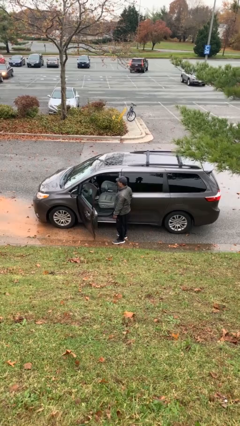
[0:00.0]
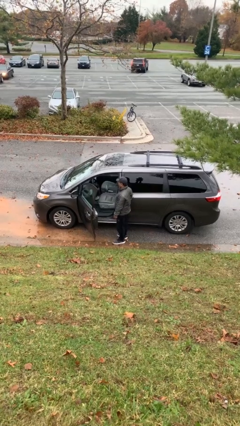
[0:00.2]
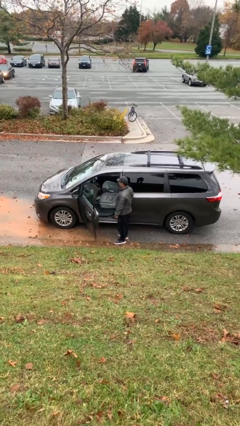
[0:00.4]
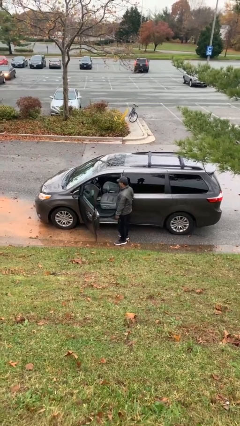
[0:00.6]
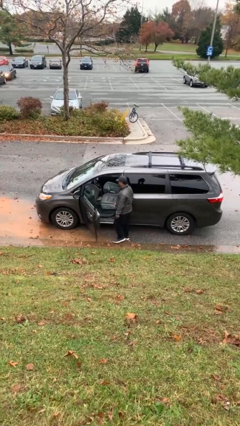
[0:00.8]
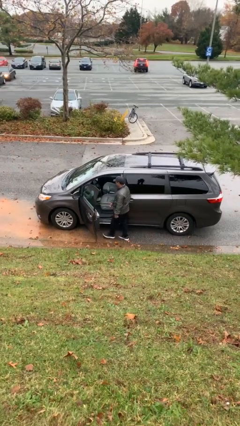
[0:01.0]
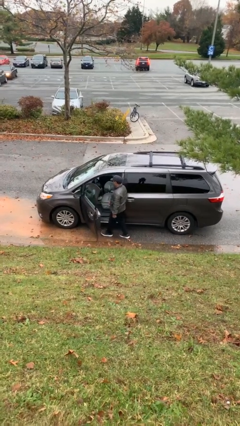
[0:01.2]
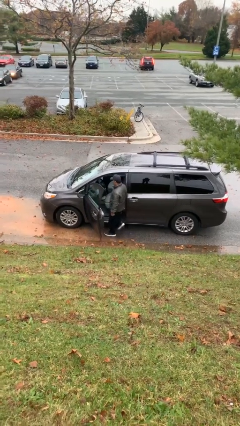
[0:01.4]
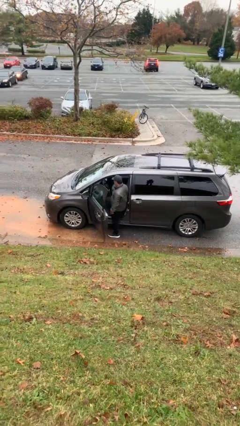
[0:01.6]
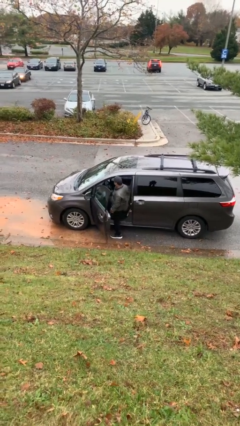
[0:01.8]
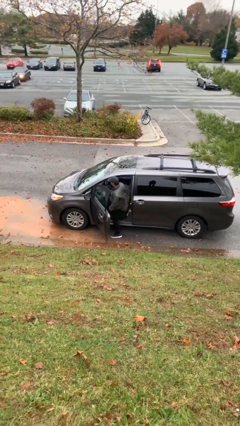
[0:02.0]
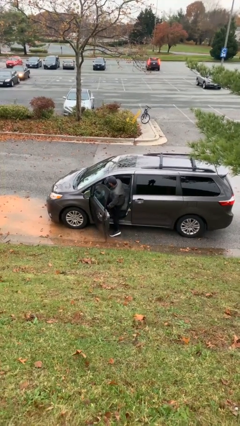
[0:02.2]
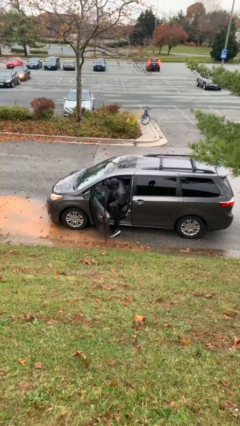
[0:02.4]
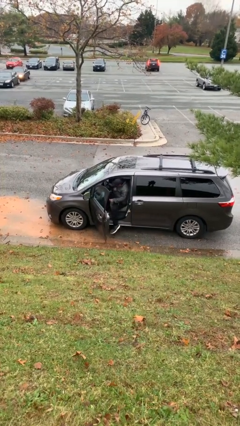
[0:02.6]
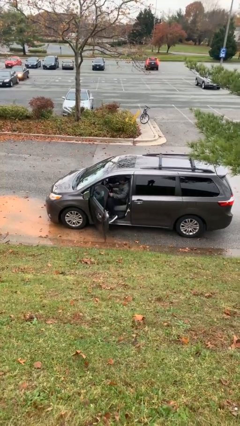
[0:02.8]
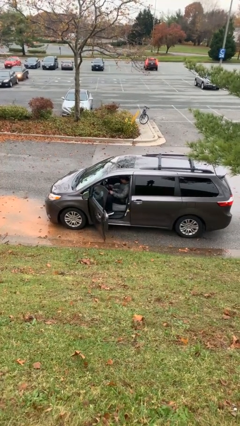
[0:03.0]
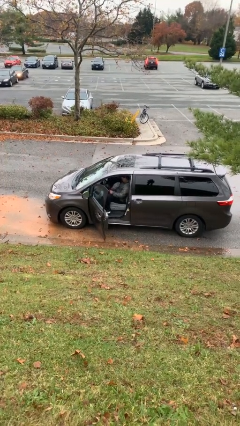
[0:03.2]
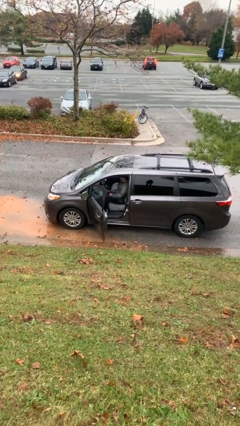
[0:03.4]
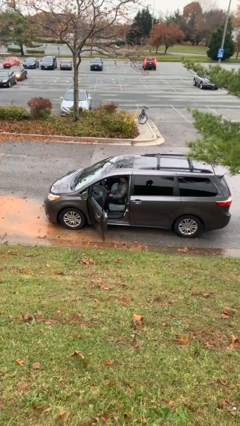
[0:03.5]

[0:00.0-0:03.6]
person enters car

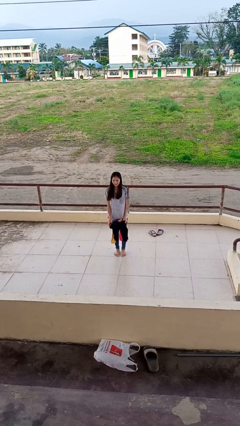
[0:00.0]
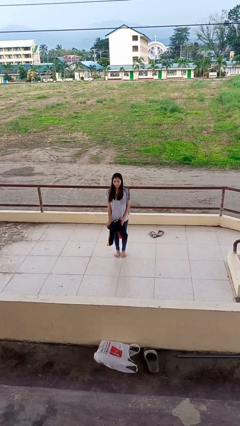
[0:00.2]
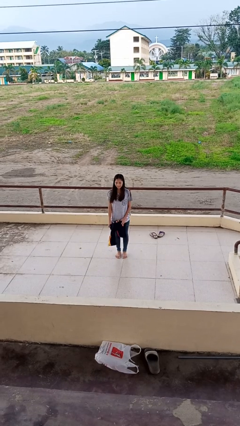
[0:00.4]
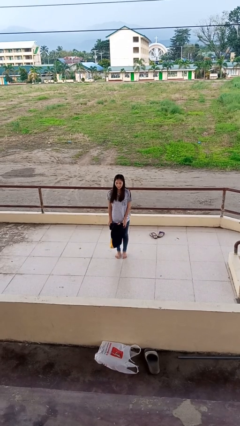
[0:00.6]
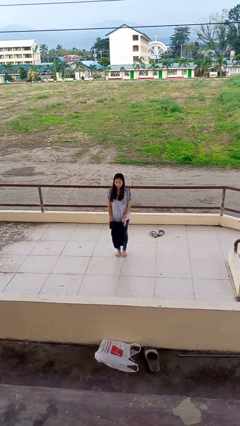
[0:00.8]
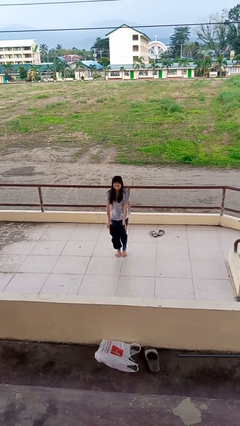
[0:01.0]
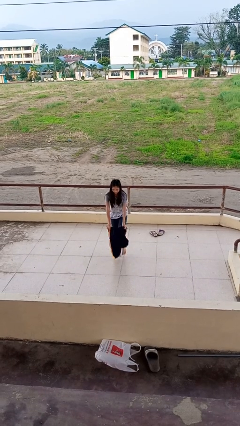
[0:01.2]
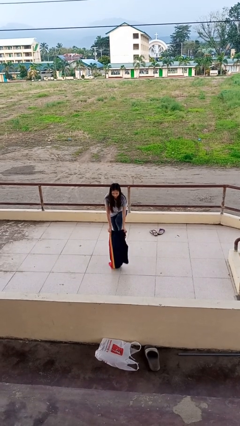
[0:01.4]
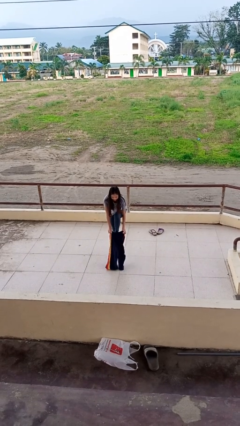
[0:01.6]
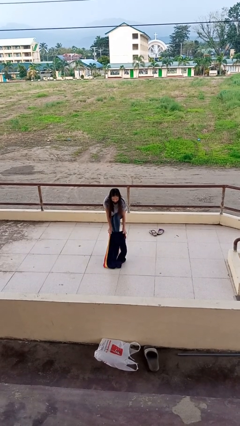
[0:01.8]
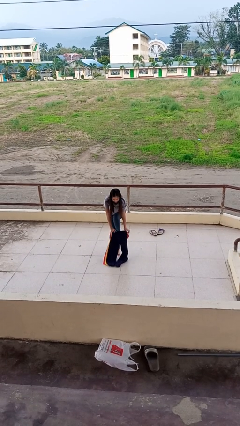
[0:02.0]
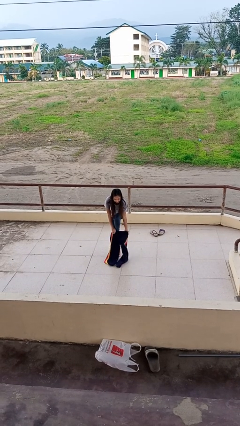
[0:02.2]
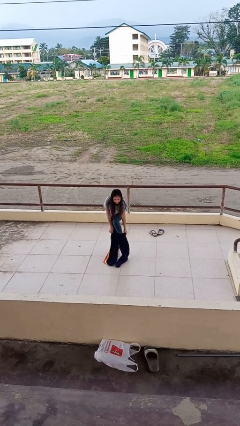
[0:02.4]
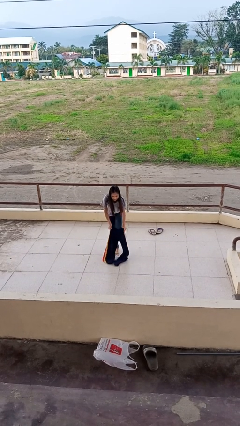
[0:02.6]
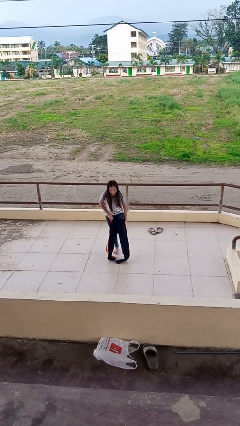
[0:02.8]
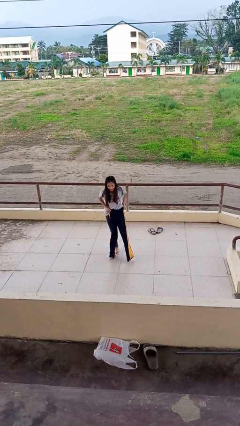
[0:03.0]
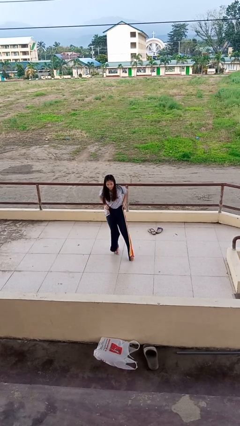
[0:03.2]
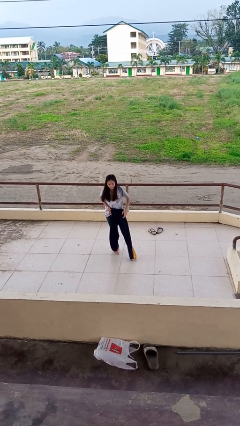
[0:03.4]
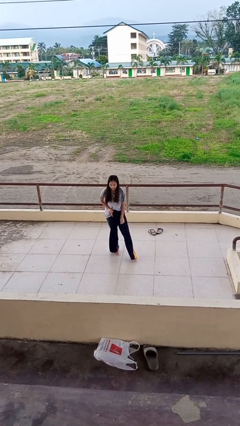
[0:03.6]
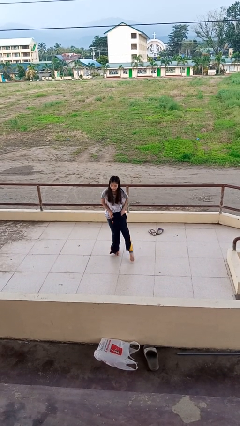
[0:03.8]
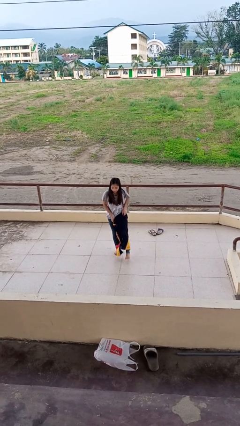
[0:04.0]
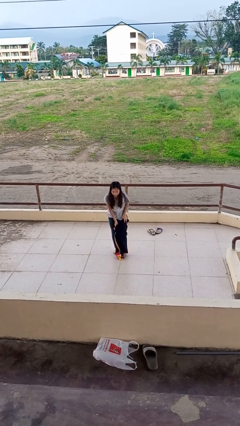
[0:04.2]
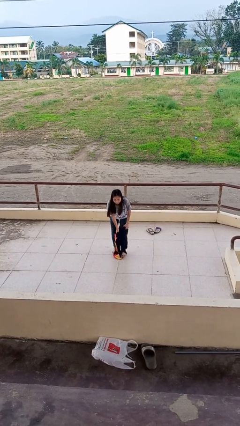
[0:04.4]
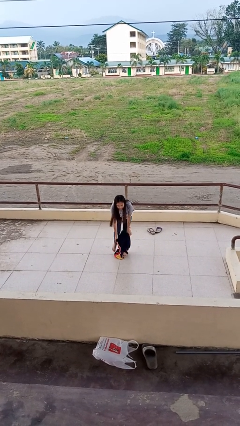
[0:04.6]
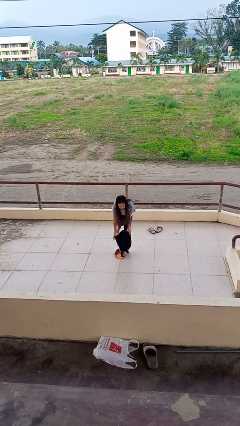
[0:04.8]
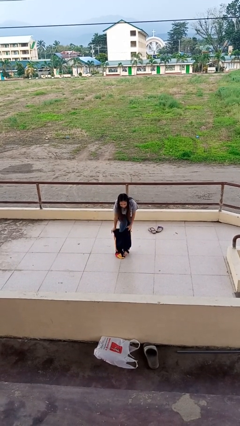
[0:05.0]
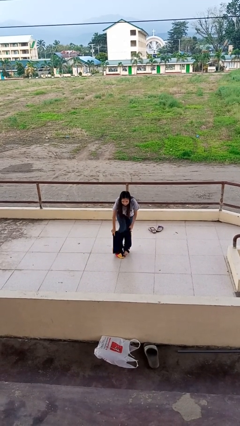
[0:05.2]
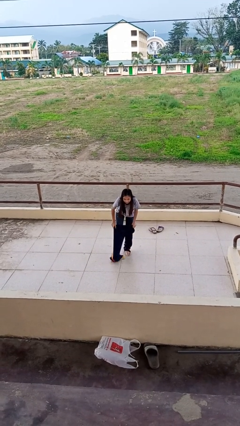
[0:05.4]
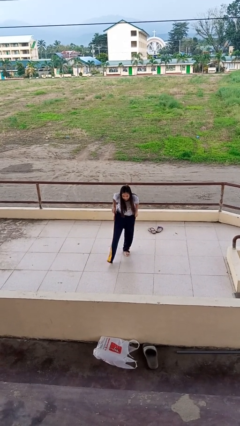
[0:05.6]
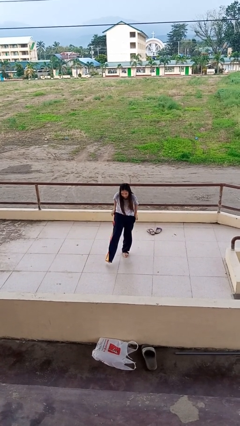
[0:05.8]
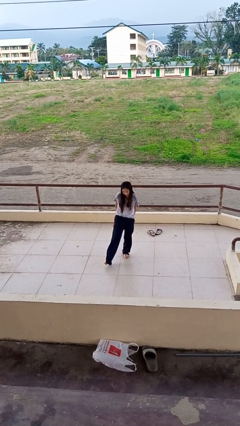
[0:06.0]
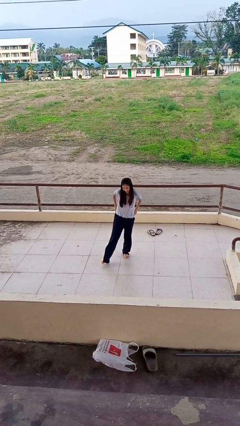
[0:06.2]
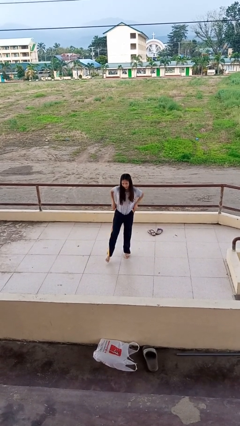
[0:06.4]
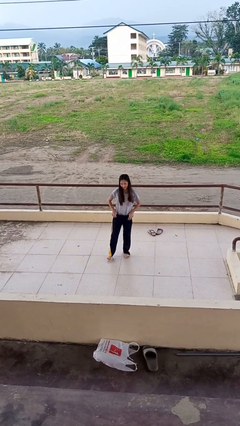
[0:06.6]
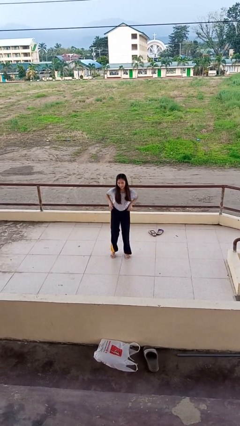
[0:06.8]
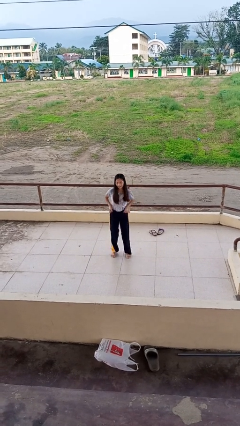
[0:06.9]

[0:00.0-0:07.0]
person puts on pants

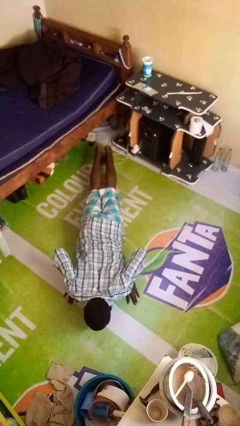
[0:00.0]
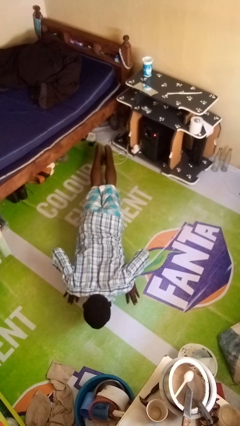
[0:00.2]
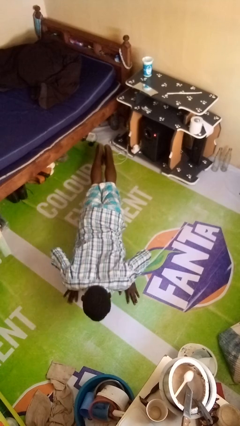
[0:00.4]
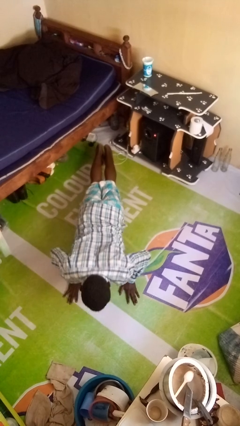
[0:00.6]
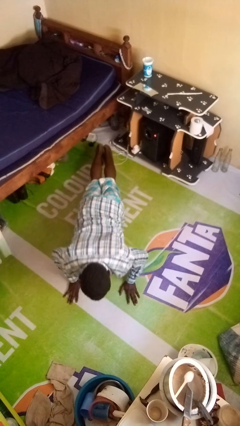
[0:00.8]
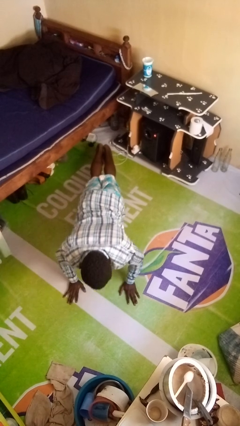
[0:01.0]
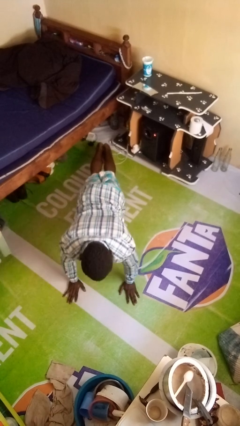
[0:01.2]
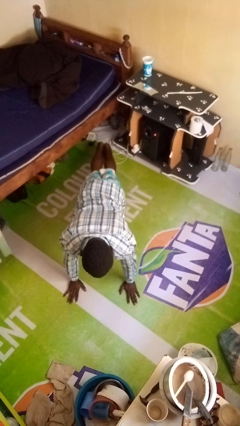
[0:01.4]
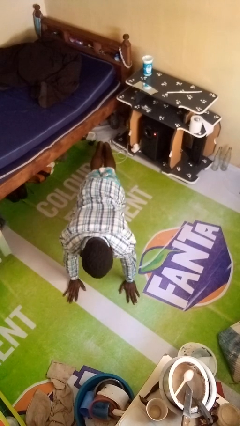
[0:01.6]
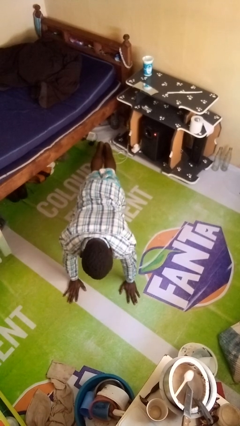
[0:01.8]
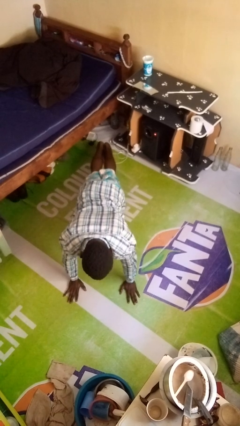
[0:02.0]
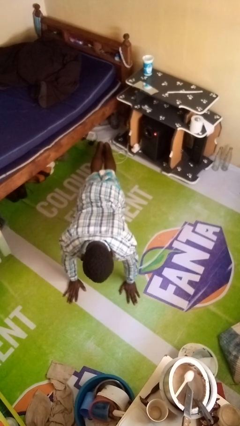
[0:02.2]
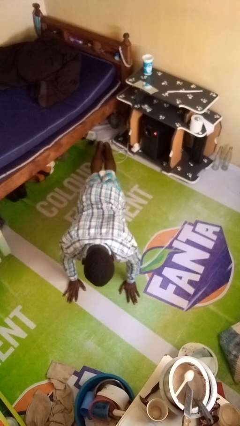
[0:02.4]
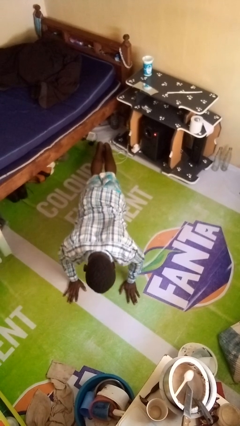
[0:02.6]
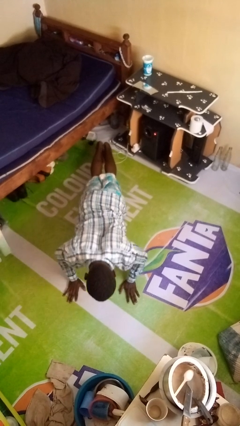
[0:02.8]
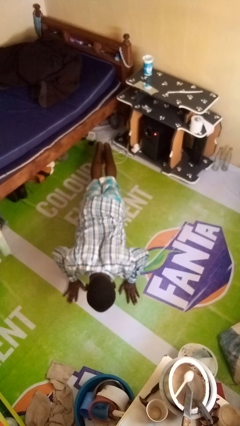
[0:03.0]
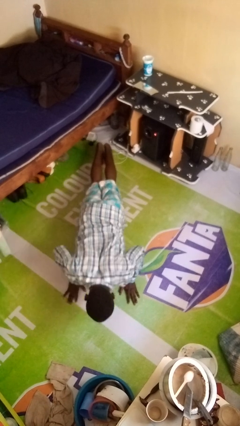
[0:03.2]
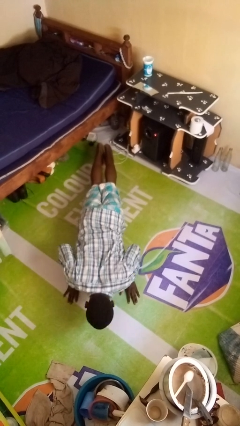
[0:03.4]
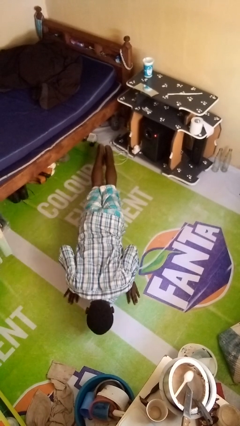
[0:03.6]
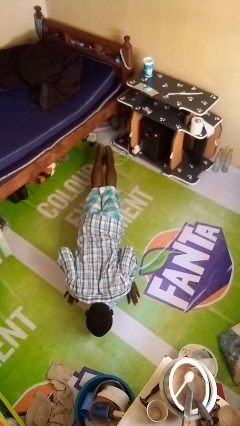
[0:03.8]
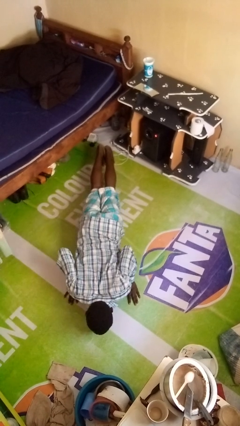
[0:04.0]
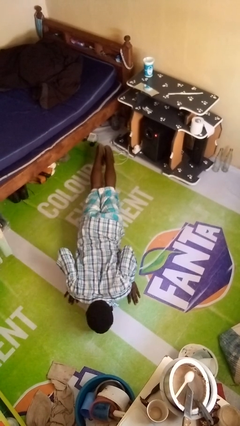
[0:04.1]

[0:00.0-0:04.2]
person exercises with pushup

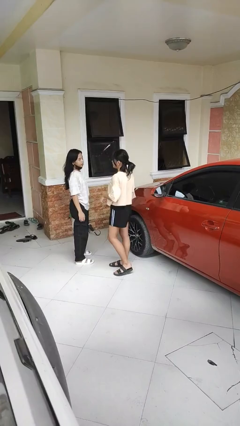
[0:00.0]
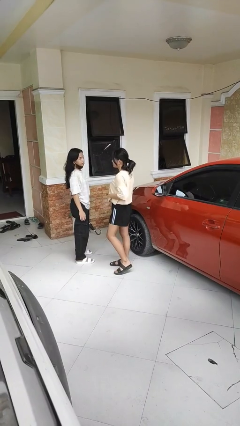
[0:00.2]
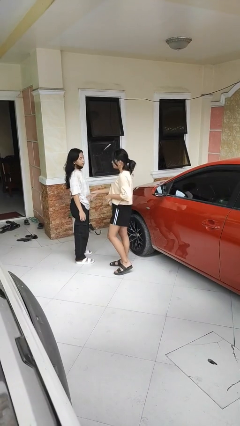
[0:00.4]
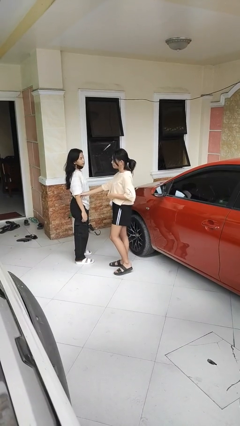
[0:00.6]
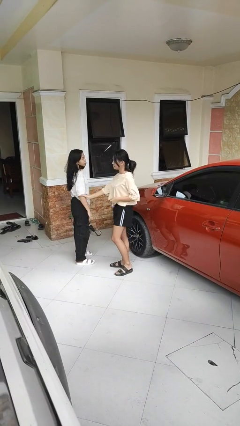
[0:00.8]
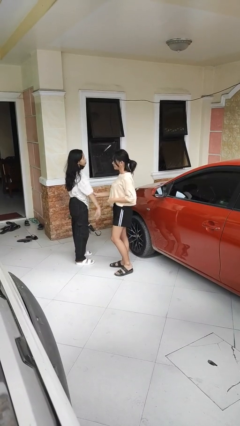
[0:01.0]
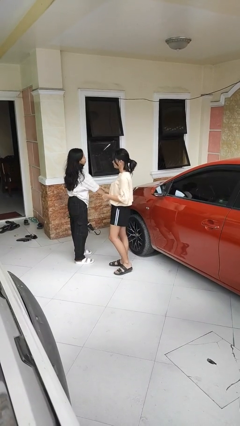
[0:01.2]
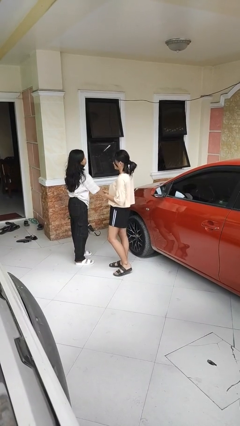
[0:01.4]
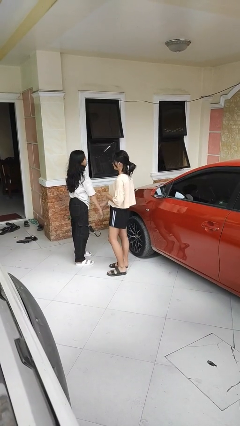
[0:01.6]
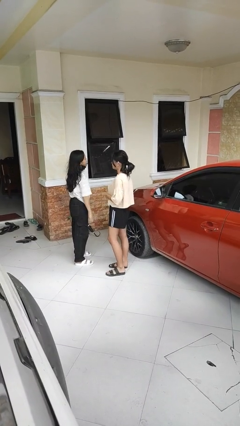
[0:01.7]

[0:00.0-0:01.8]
person grabs person by forearm

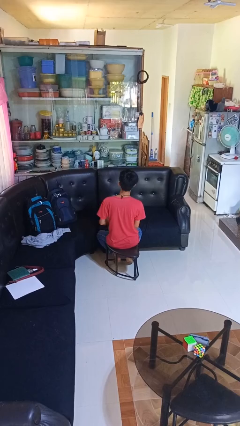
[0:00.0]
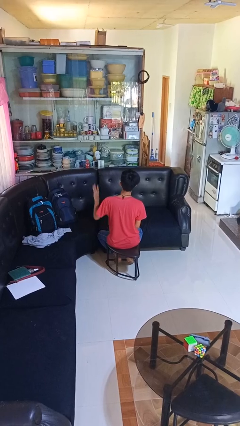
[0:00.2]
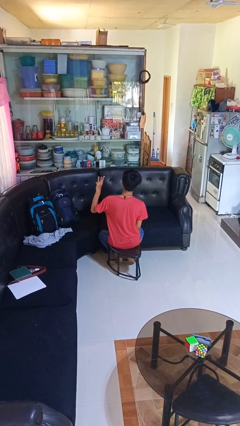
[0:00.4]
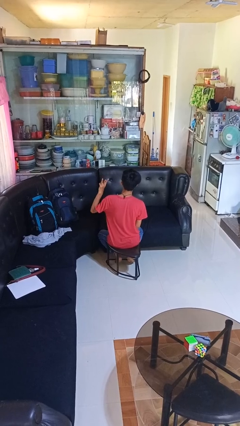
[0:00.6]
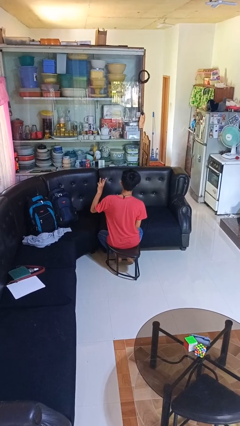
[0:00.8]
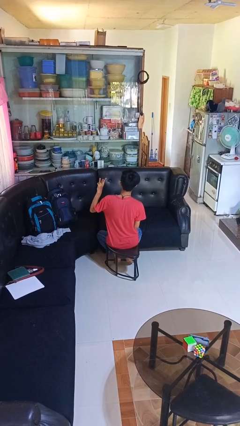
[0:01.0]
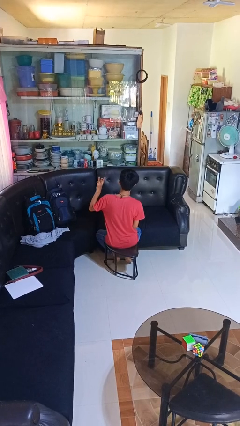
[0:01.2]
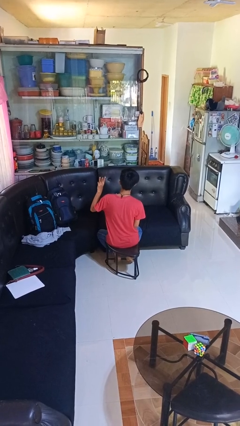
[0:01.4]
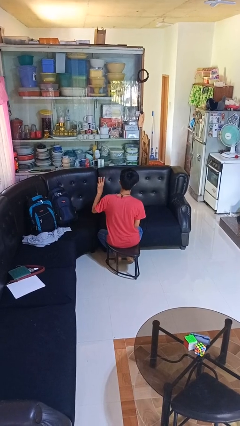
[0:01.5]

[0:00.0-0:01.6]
person gestures number three
